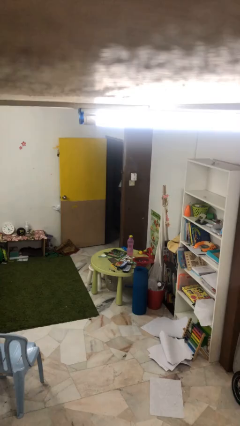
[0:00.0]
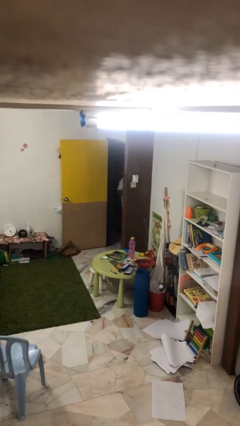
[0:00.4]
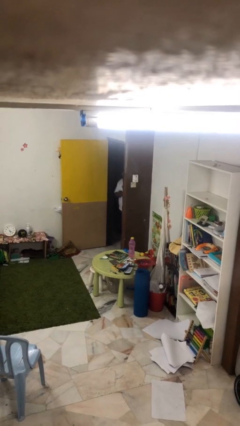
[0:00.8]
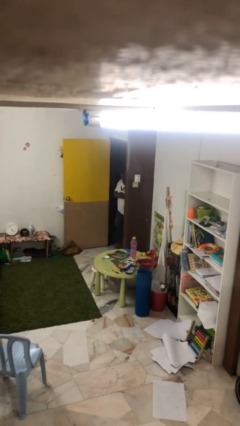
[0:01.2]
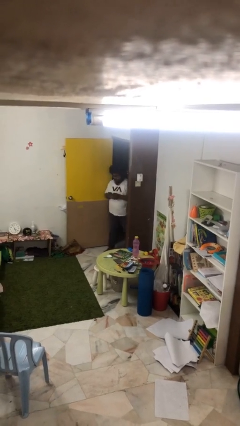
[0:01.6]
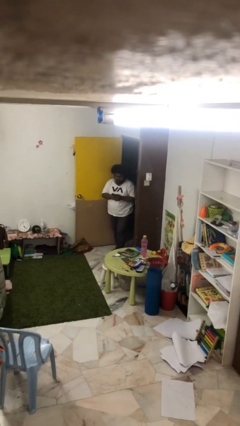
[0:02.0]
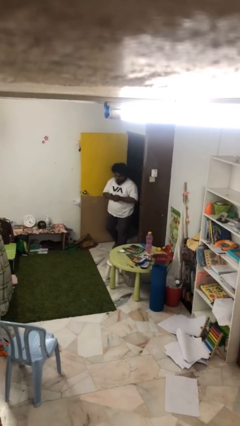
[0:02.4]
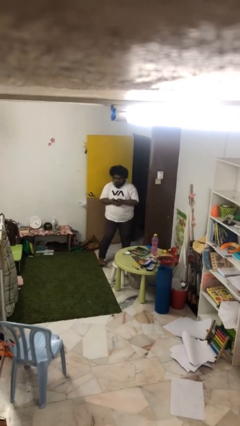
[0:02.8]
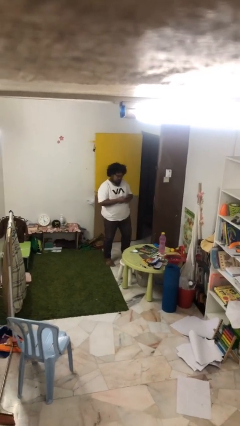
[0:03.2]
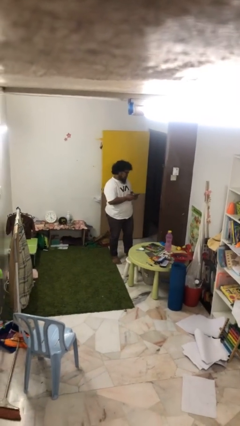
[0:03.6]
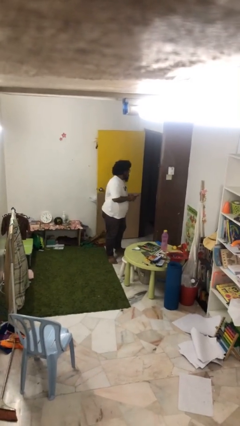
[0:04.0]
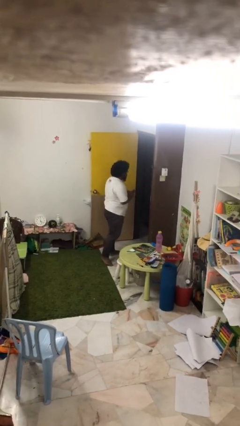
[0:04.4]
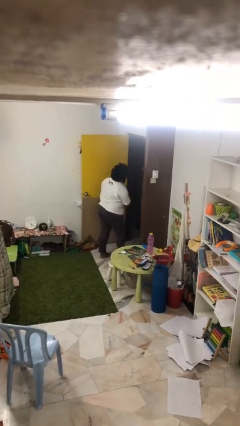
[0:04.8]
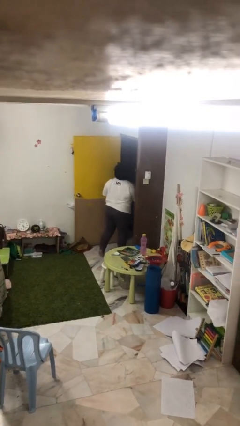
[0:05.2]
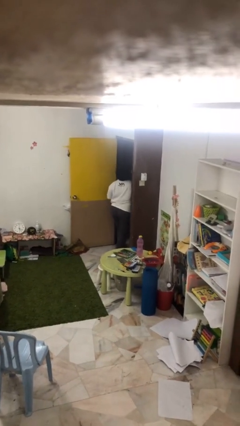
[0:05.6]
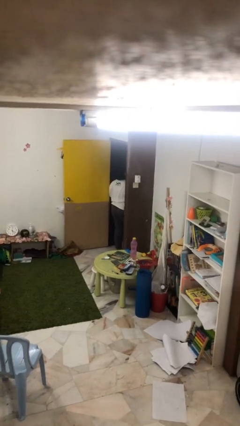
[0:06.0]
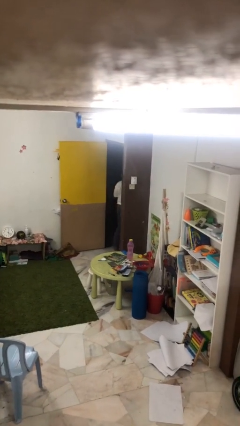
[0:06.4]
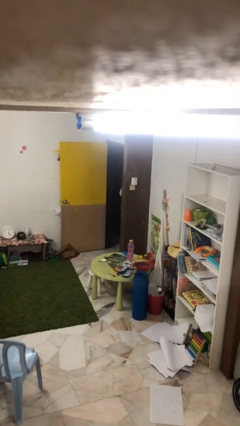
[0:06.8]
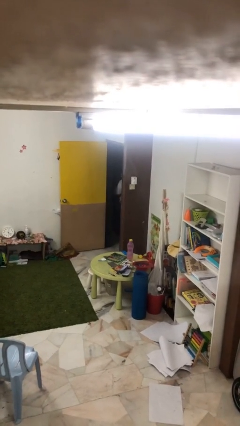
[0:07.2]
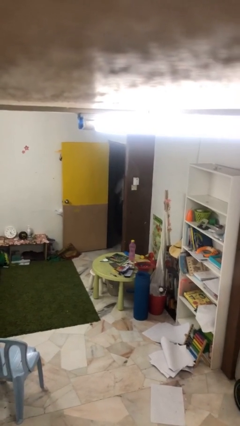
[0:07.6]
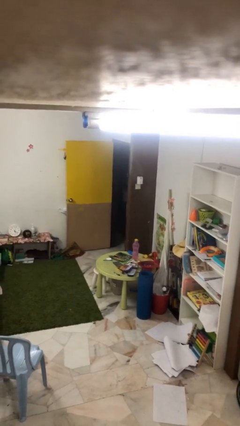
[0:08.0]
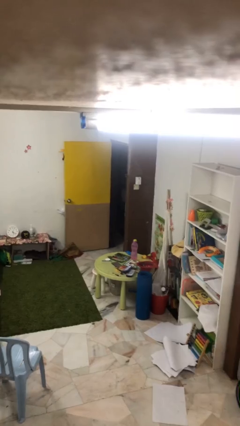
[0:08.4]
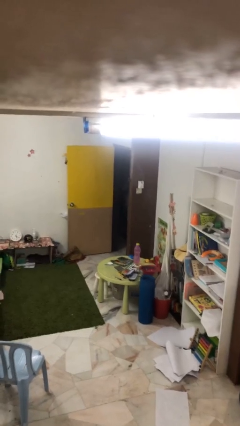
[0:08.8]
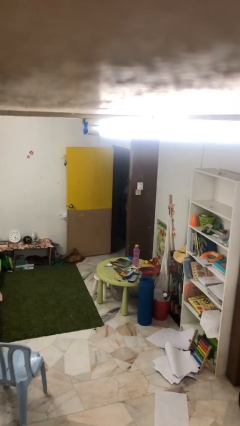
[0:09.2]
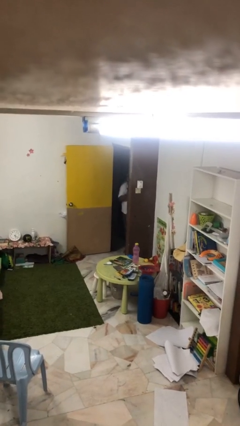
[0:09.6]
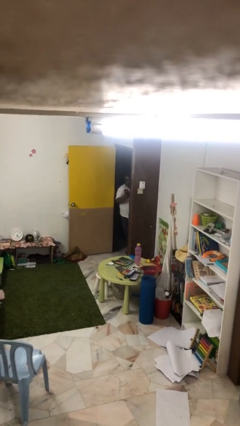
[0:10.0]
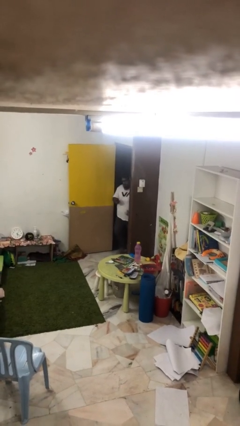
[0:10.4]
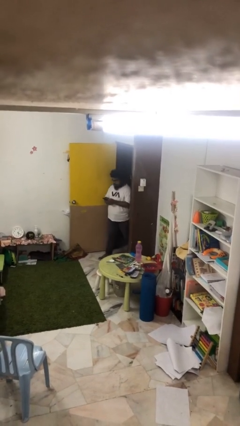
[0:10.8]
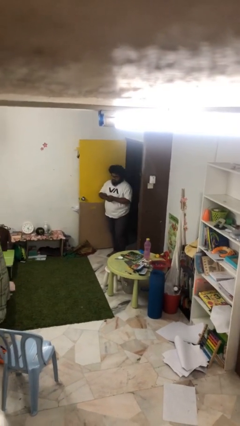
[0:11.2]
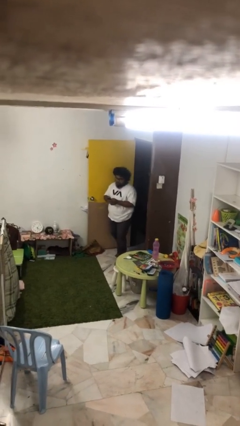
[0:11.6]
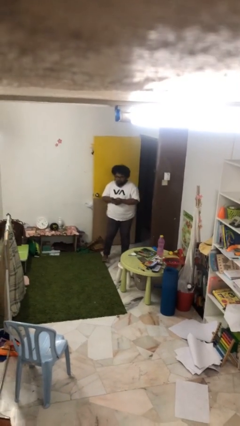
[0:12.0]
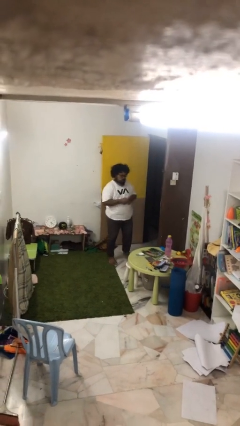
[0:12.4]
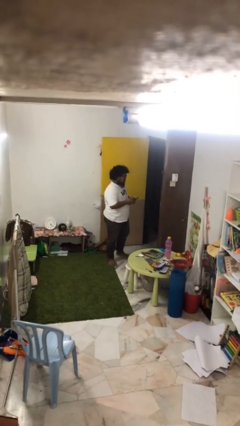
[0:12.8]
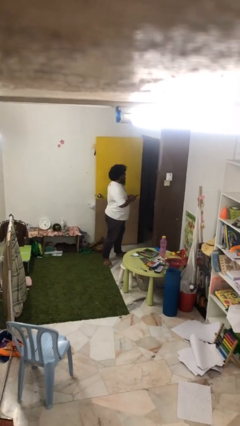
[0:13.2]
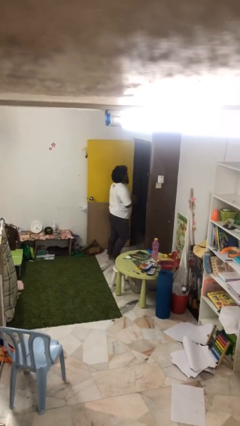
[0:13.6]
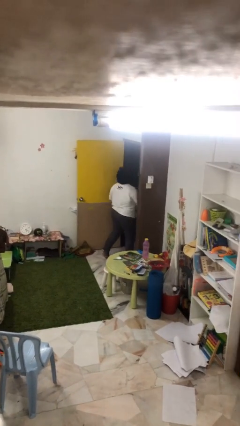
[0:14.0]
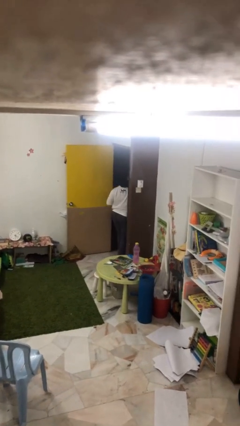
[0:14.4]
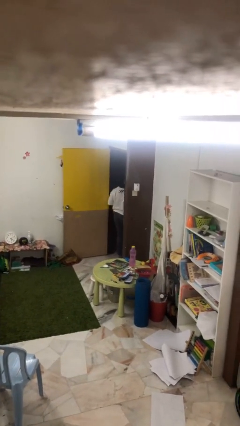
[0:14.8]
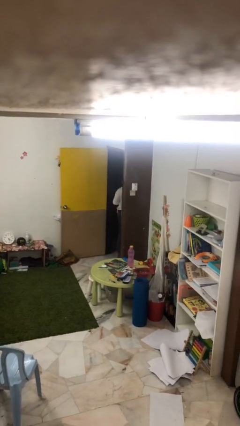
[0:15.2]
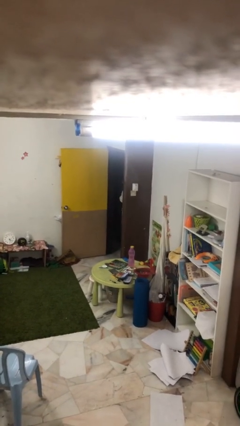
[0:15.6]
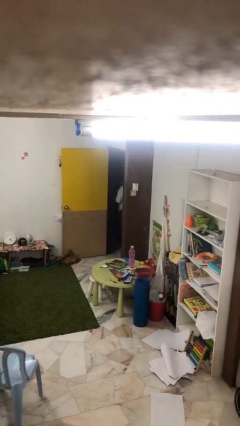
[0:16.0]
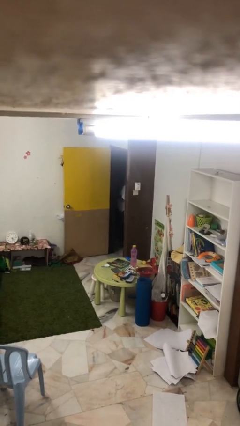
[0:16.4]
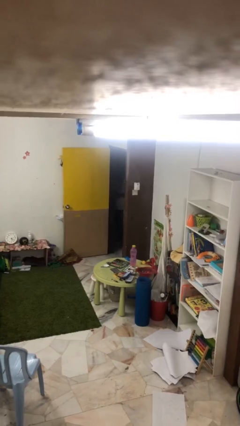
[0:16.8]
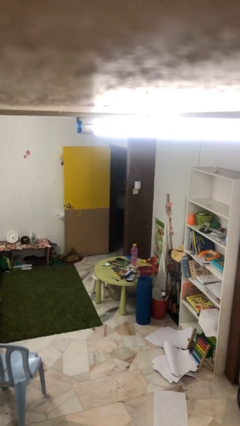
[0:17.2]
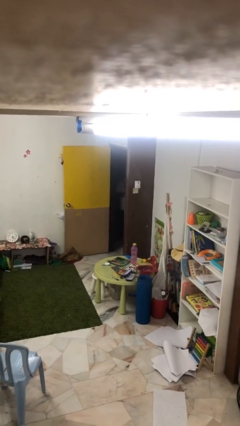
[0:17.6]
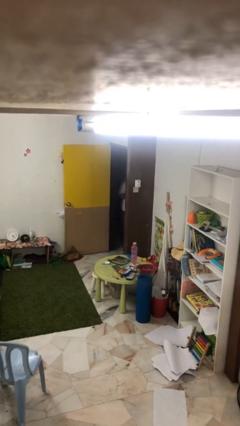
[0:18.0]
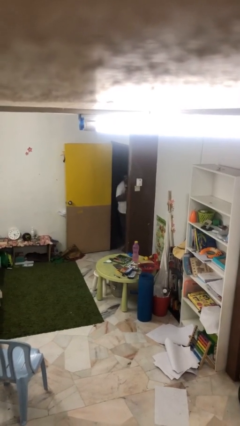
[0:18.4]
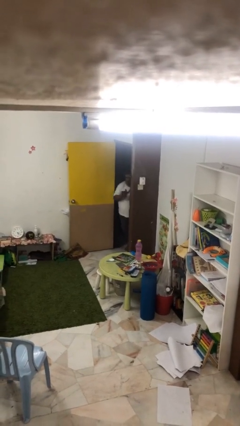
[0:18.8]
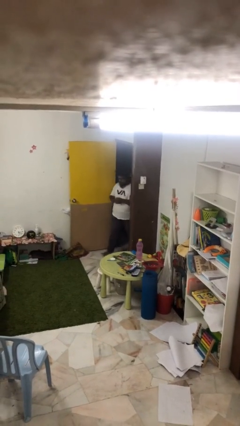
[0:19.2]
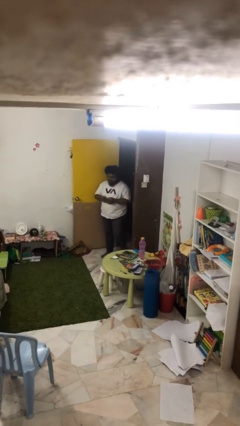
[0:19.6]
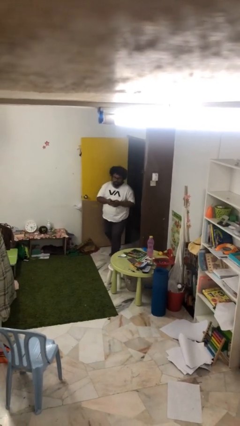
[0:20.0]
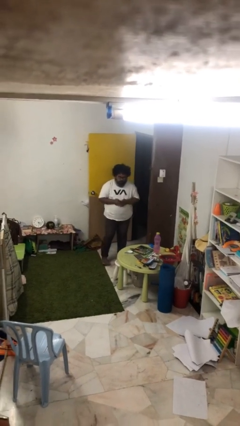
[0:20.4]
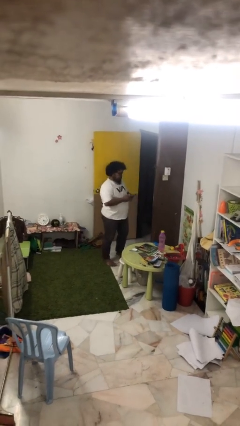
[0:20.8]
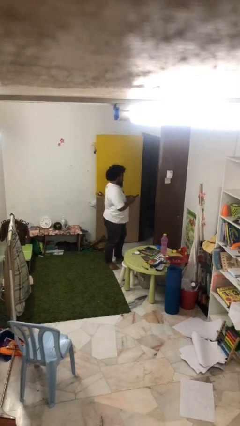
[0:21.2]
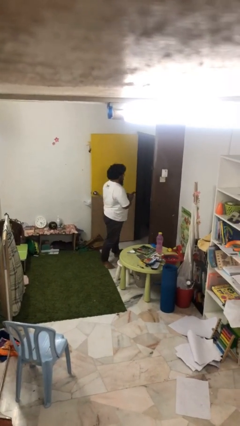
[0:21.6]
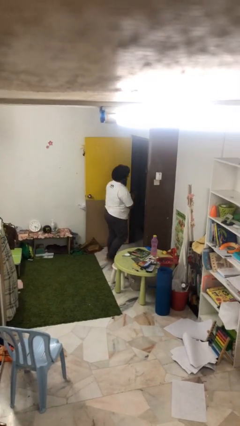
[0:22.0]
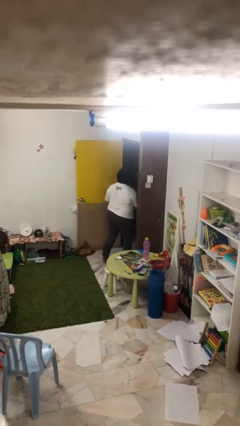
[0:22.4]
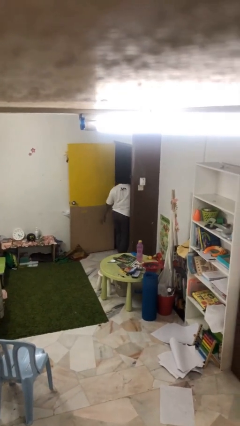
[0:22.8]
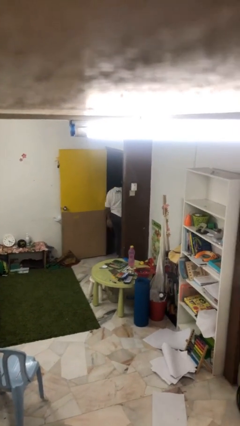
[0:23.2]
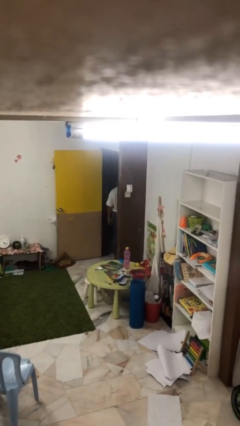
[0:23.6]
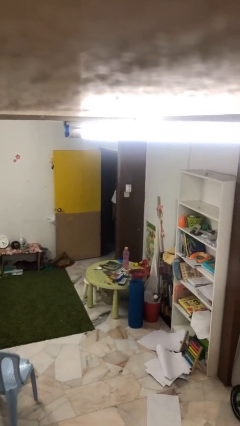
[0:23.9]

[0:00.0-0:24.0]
person texts on phone

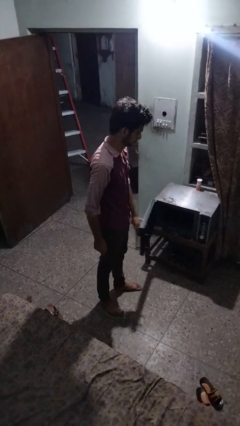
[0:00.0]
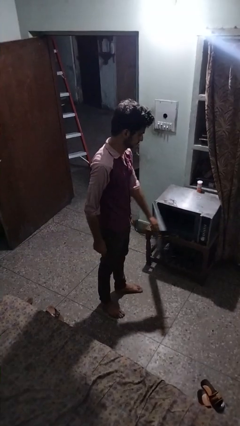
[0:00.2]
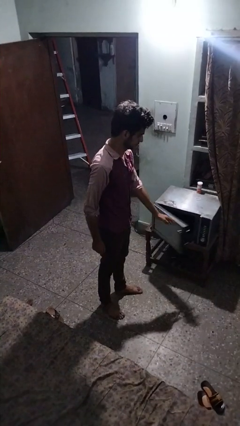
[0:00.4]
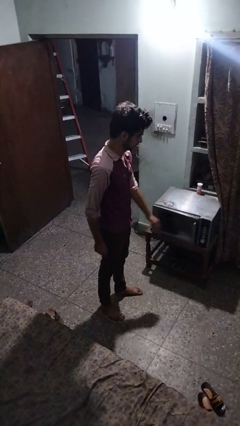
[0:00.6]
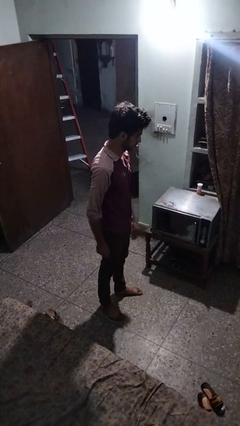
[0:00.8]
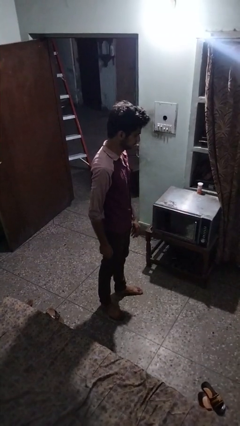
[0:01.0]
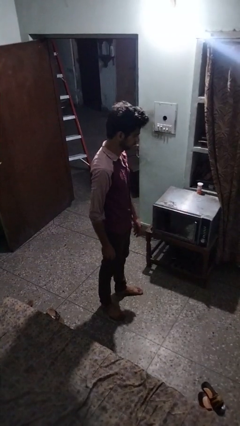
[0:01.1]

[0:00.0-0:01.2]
person closes microwave

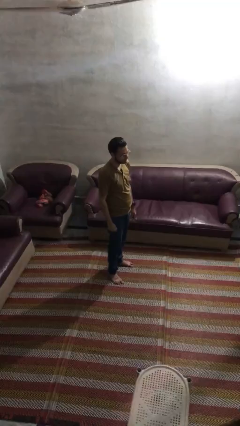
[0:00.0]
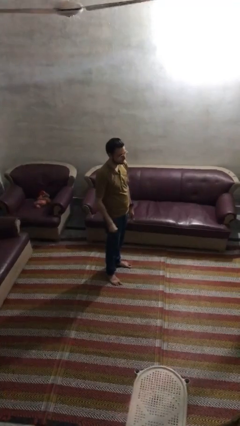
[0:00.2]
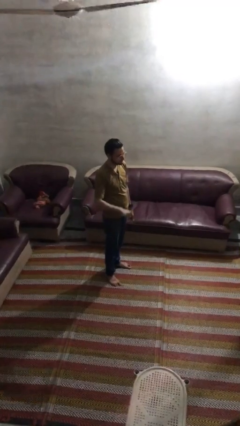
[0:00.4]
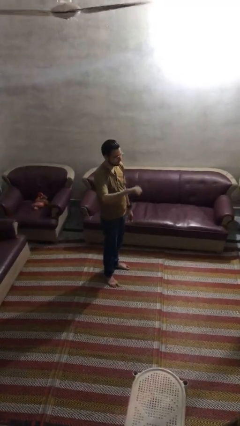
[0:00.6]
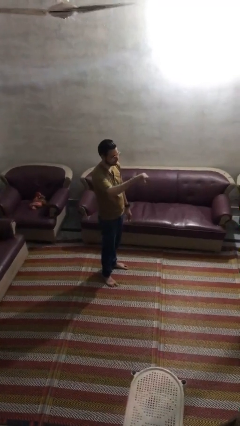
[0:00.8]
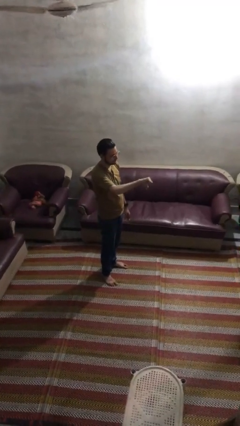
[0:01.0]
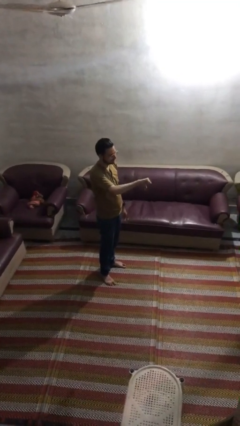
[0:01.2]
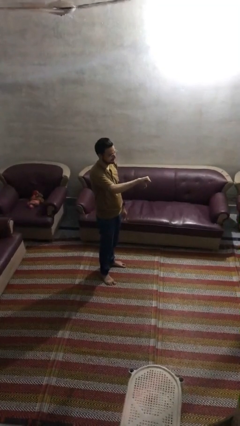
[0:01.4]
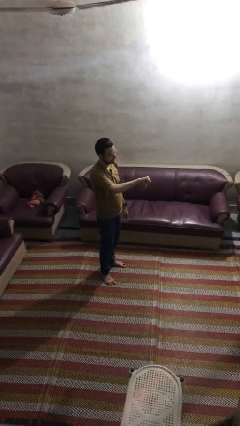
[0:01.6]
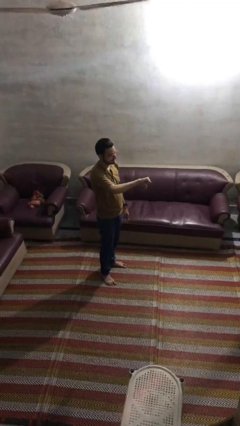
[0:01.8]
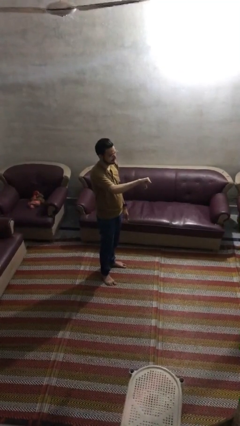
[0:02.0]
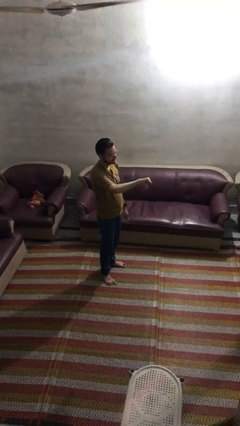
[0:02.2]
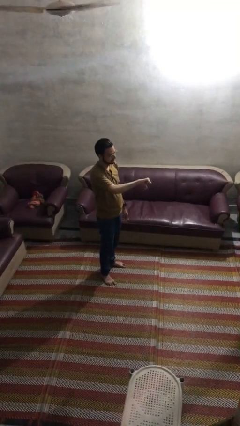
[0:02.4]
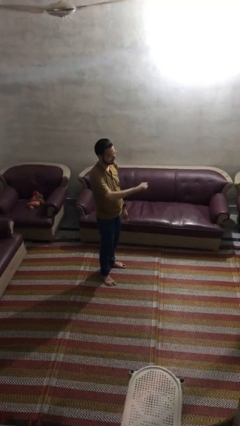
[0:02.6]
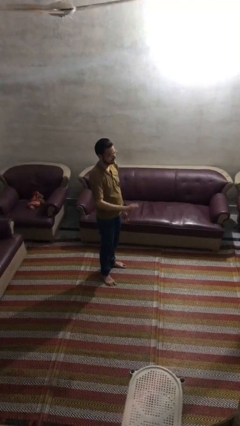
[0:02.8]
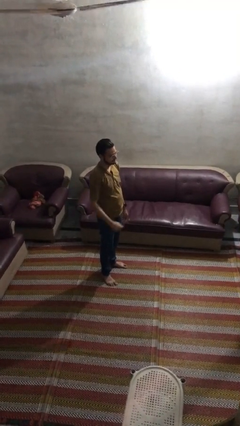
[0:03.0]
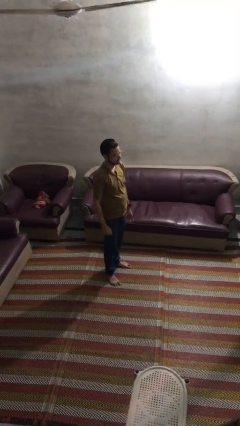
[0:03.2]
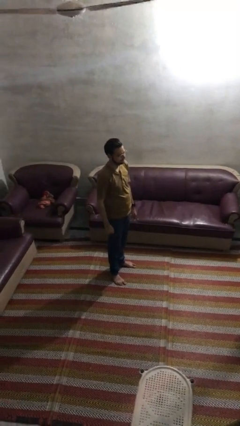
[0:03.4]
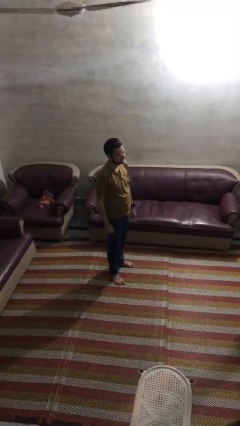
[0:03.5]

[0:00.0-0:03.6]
person gestures thumbs down

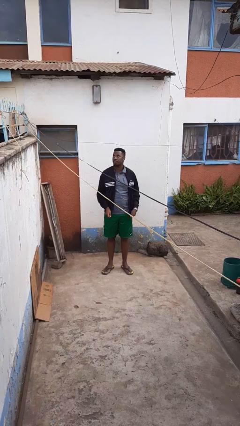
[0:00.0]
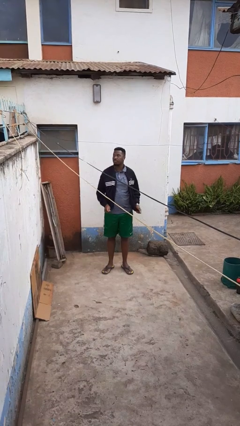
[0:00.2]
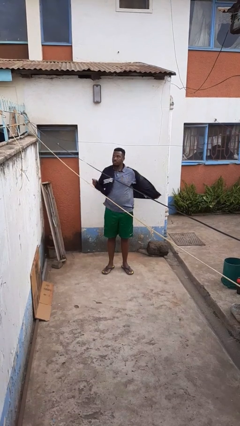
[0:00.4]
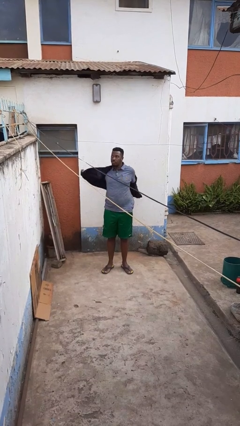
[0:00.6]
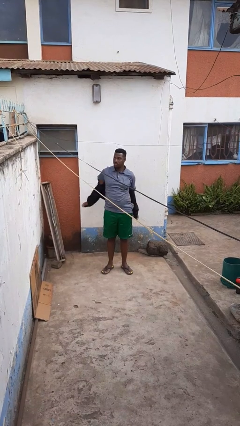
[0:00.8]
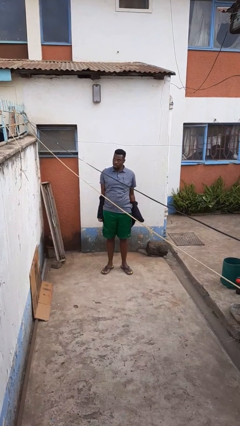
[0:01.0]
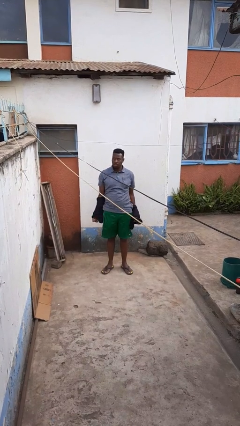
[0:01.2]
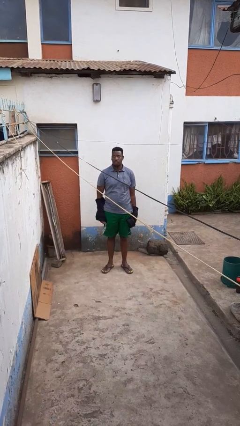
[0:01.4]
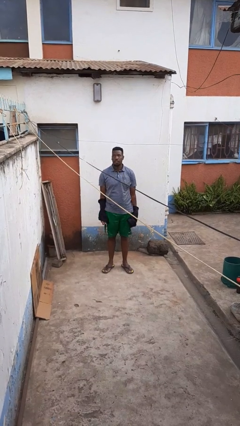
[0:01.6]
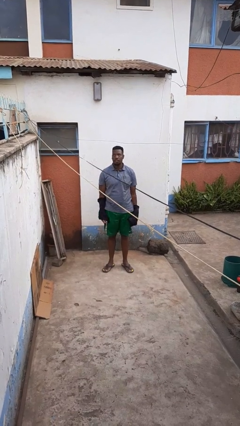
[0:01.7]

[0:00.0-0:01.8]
person takes off jacket
